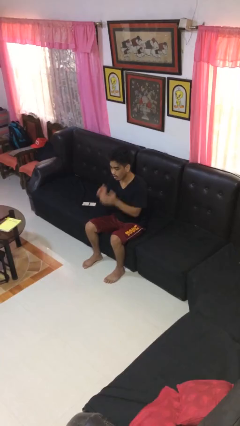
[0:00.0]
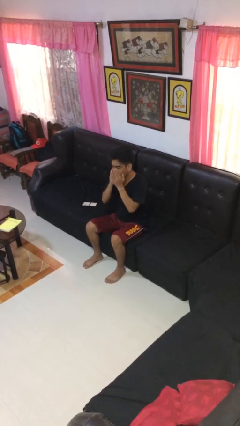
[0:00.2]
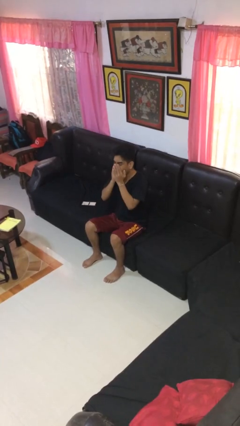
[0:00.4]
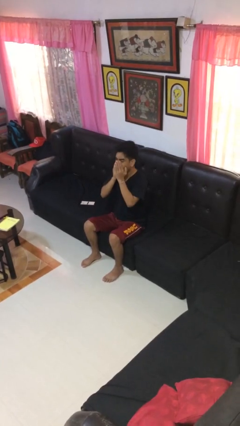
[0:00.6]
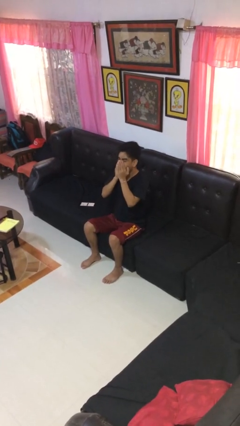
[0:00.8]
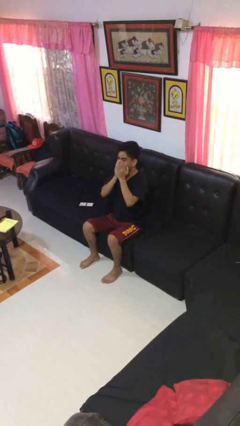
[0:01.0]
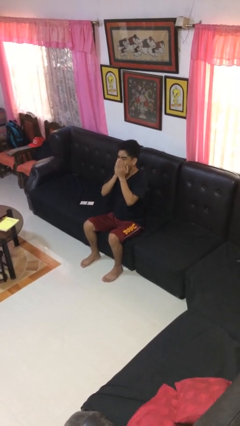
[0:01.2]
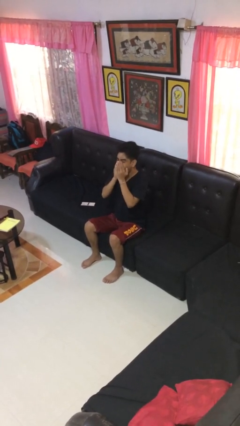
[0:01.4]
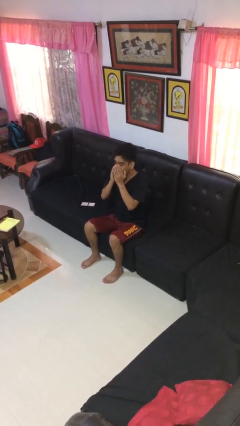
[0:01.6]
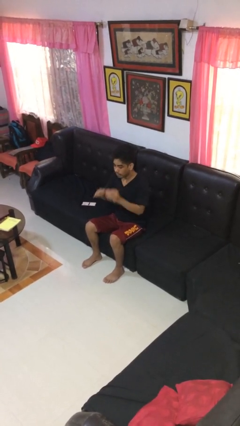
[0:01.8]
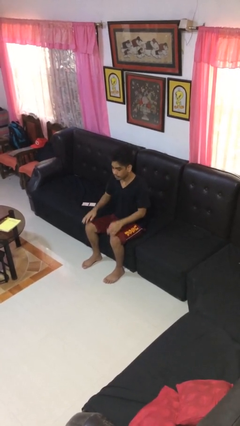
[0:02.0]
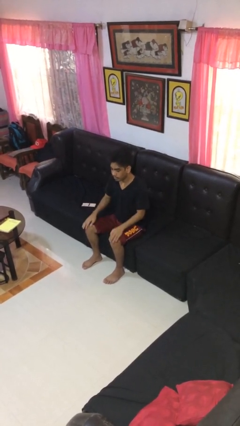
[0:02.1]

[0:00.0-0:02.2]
person yawns

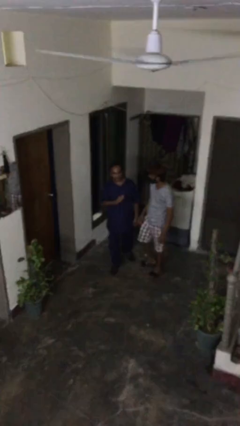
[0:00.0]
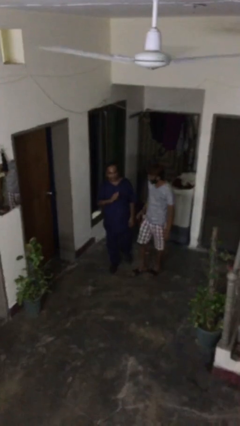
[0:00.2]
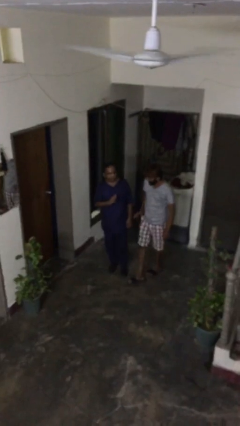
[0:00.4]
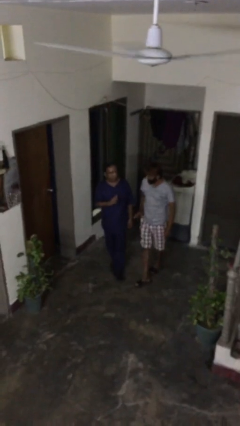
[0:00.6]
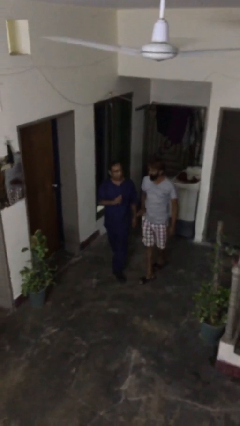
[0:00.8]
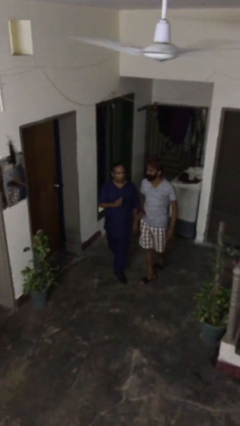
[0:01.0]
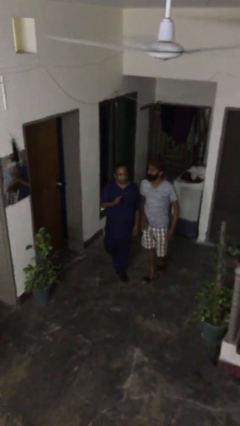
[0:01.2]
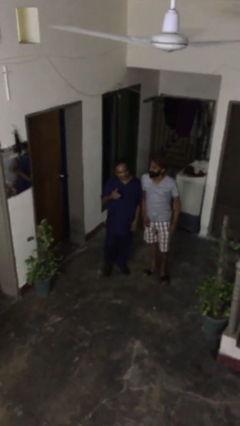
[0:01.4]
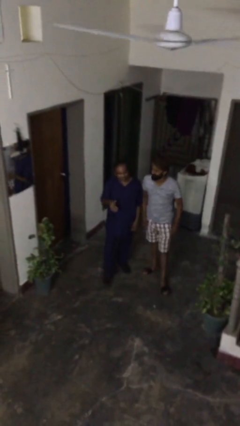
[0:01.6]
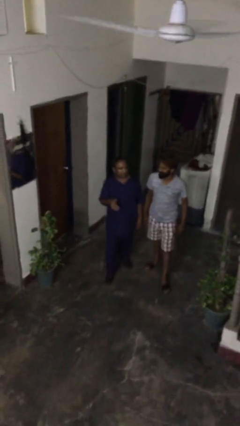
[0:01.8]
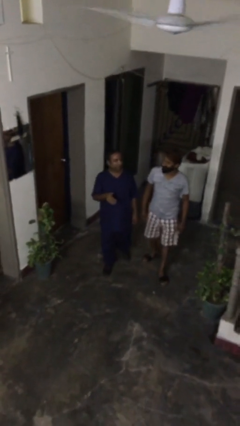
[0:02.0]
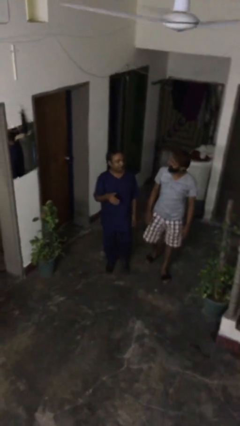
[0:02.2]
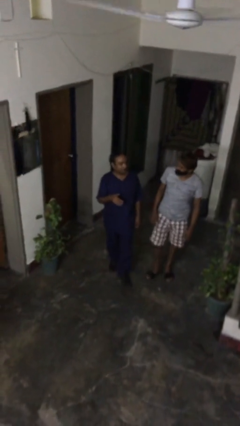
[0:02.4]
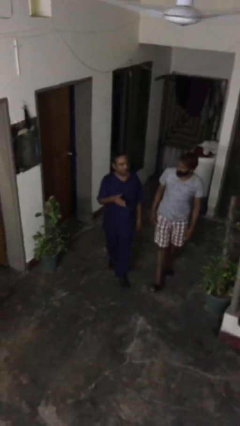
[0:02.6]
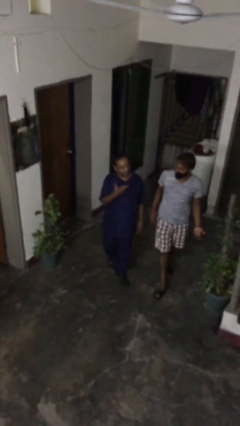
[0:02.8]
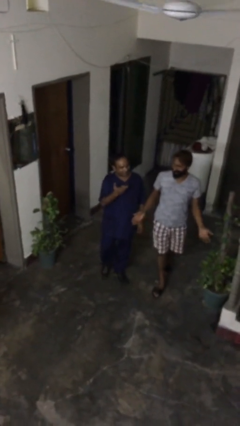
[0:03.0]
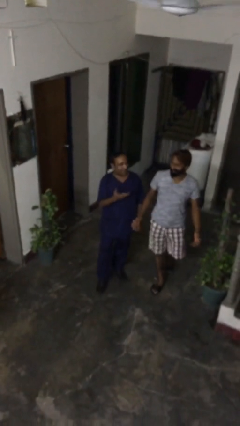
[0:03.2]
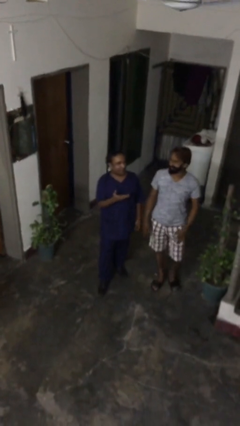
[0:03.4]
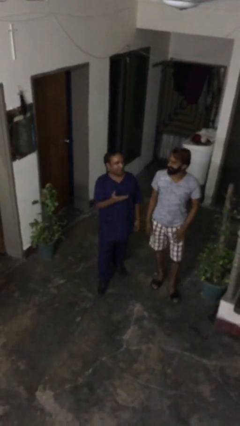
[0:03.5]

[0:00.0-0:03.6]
person talks to person

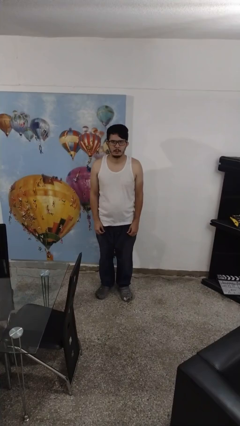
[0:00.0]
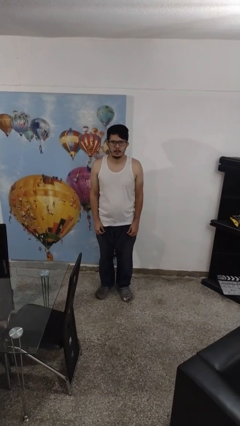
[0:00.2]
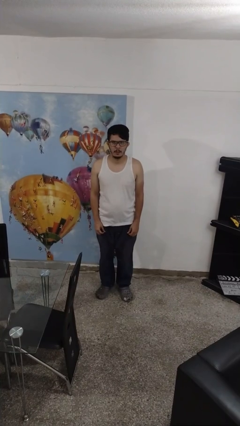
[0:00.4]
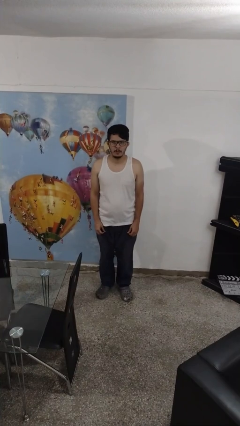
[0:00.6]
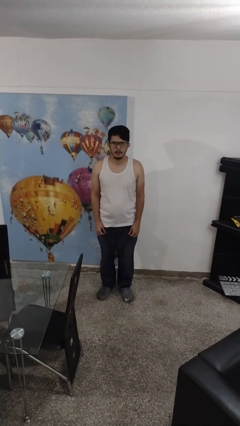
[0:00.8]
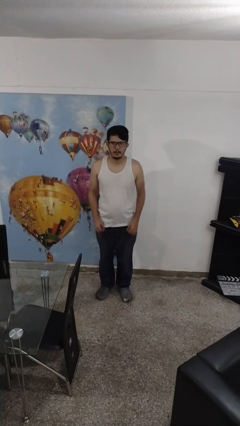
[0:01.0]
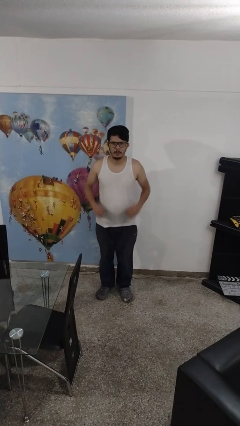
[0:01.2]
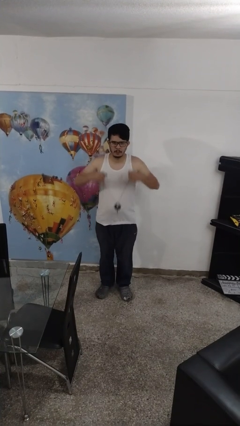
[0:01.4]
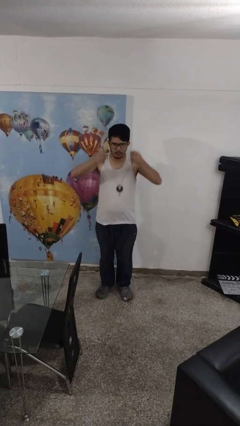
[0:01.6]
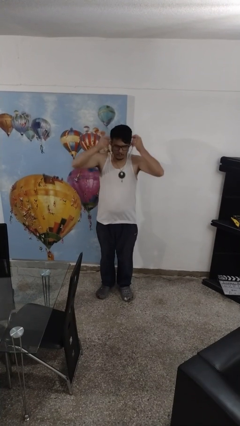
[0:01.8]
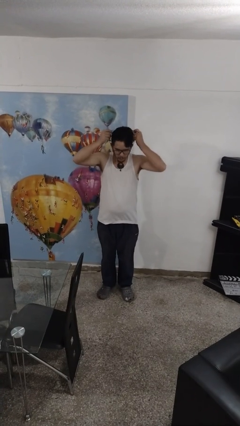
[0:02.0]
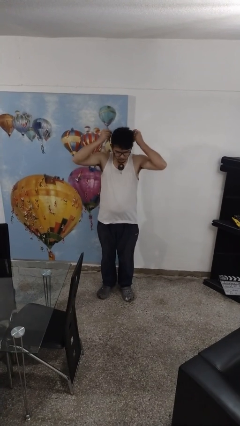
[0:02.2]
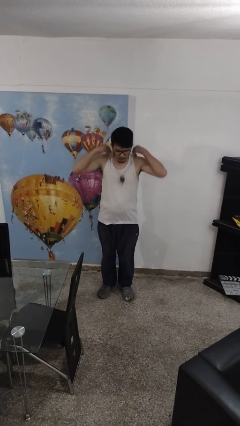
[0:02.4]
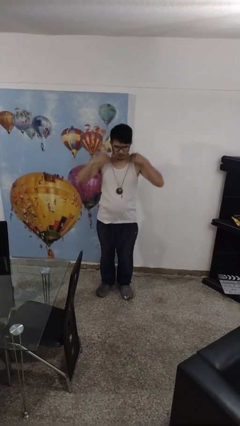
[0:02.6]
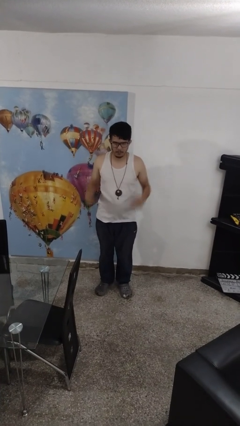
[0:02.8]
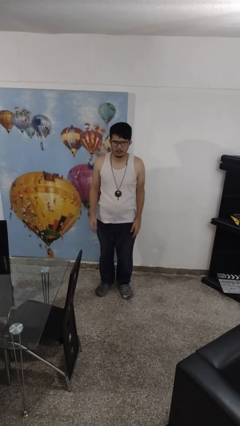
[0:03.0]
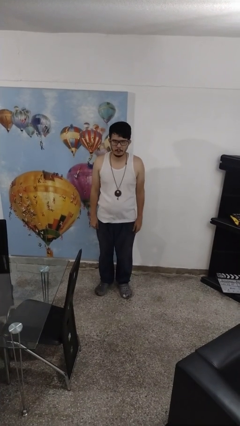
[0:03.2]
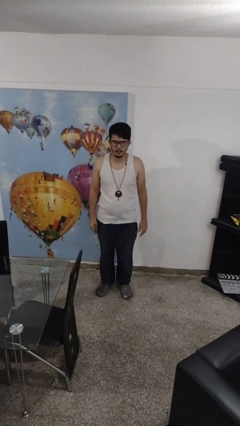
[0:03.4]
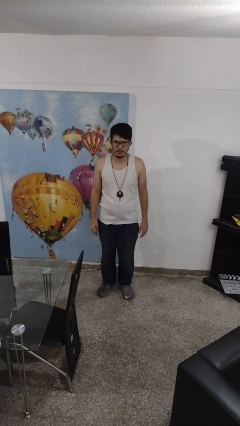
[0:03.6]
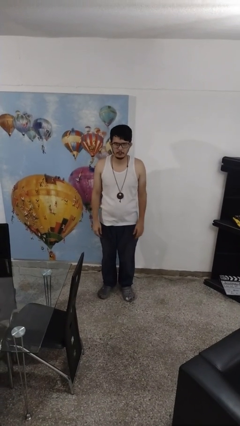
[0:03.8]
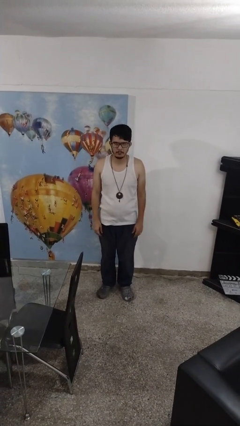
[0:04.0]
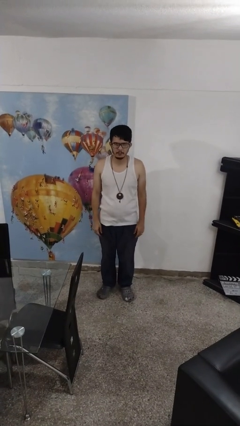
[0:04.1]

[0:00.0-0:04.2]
person puts on necklace

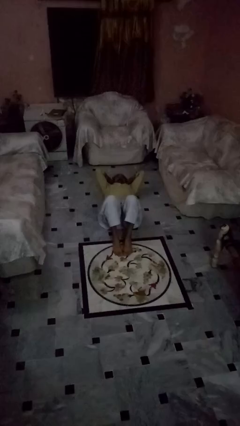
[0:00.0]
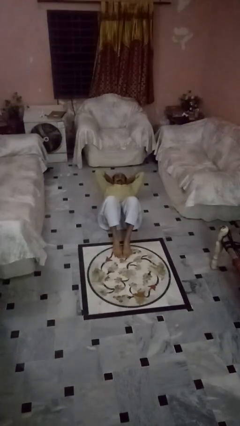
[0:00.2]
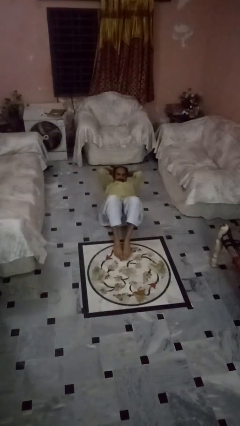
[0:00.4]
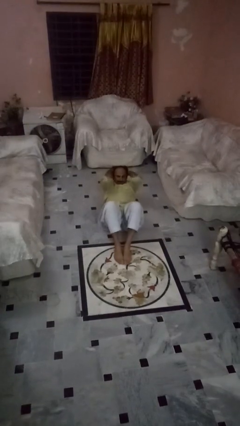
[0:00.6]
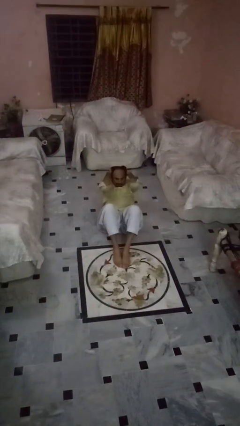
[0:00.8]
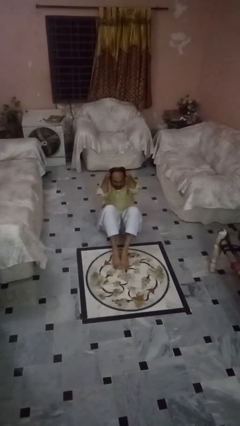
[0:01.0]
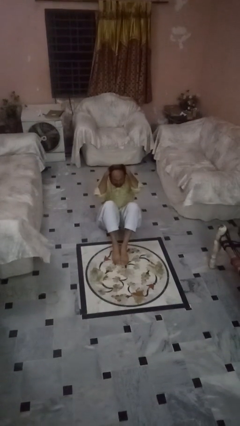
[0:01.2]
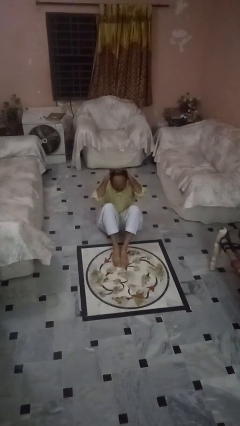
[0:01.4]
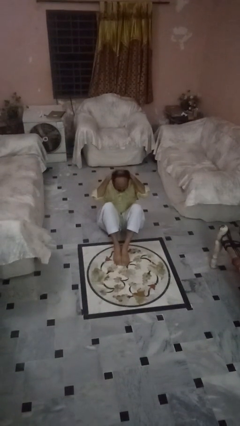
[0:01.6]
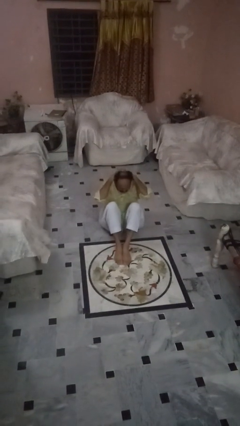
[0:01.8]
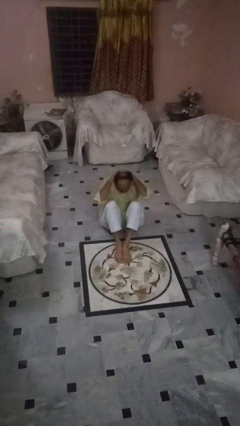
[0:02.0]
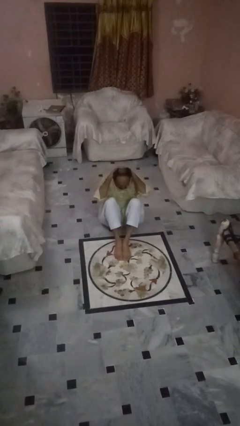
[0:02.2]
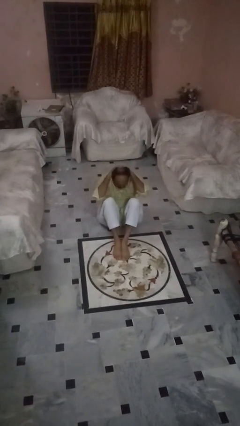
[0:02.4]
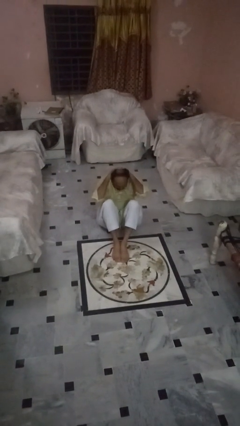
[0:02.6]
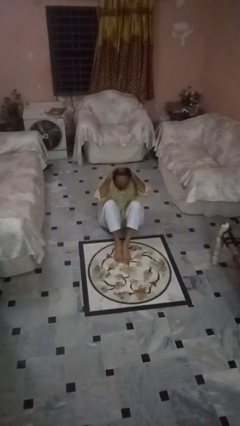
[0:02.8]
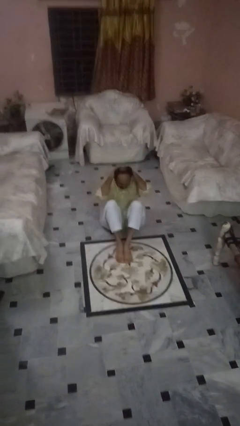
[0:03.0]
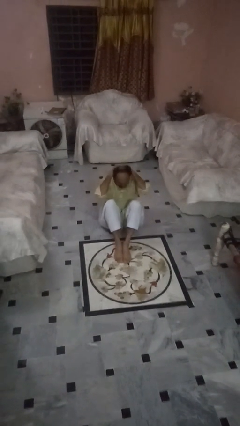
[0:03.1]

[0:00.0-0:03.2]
person exercises with situp

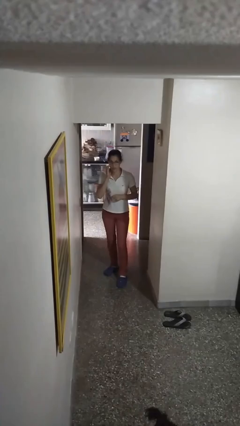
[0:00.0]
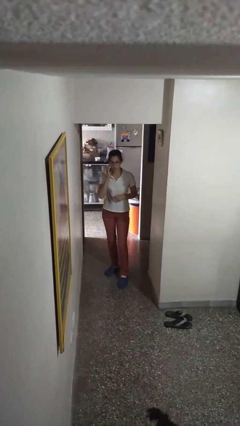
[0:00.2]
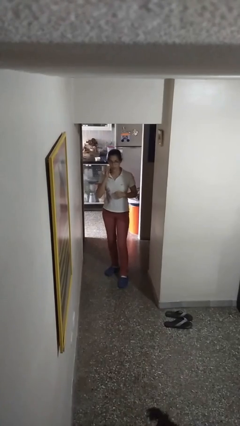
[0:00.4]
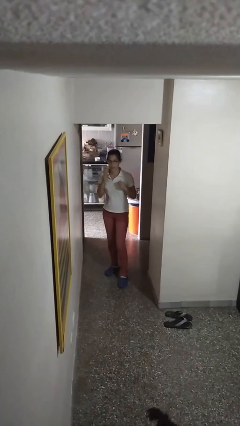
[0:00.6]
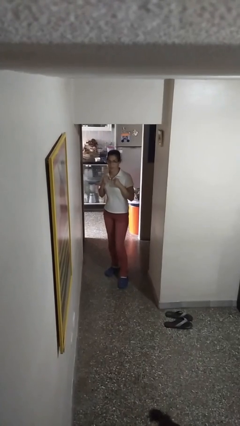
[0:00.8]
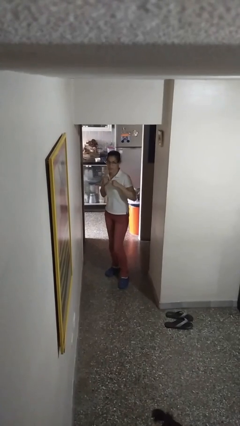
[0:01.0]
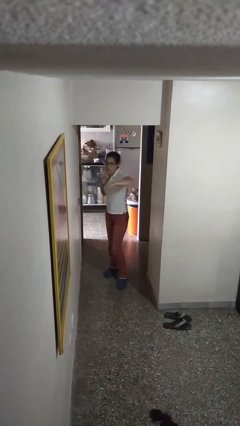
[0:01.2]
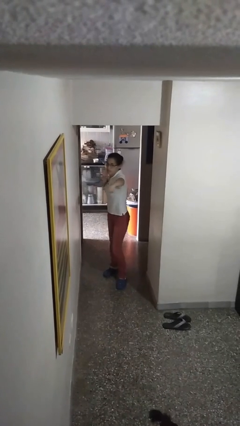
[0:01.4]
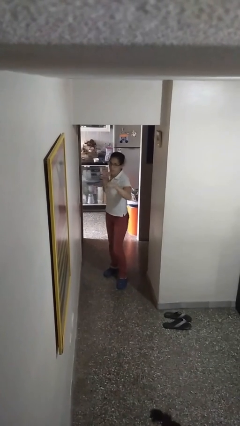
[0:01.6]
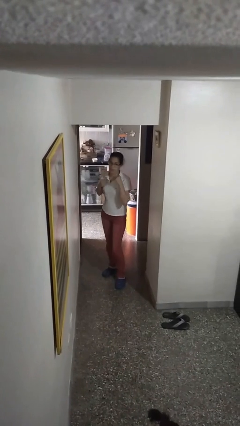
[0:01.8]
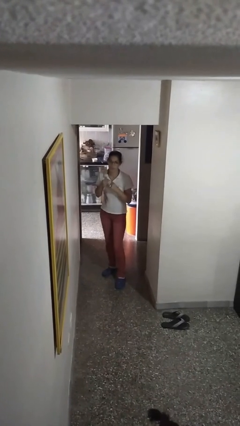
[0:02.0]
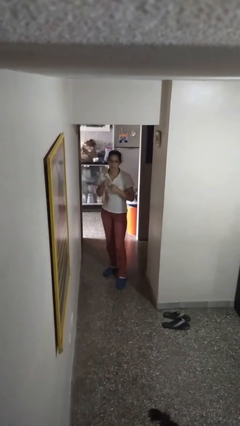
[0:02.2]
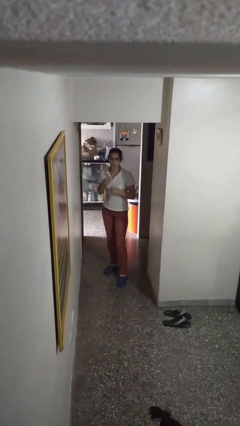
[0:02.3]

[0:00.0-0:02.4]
person karate chop

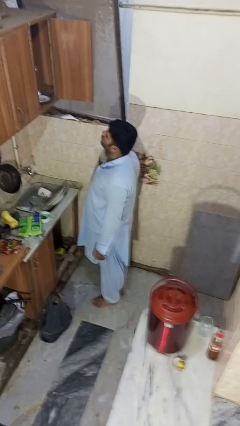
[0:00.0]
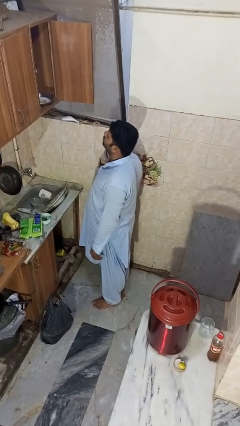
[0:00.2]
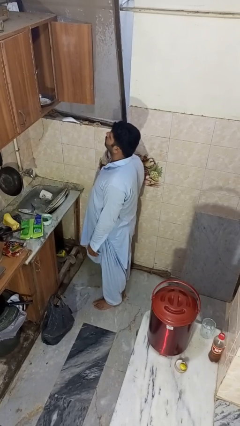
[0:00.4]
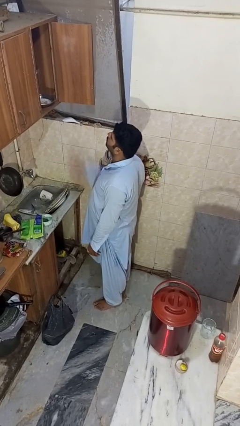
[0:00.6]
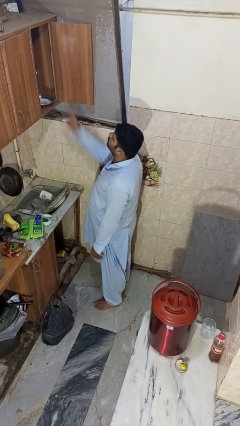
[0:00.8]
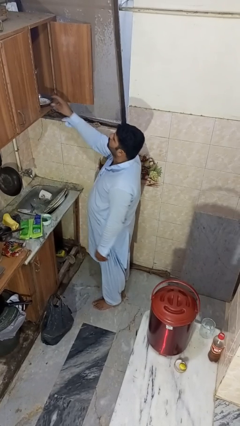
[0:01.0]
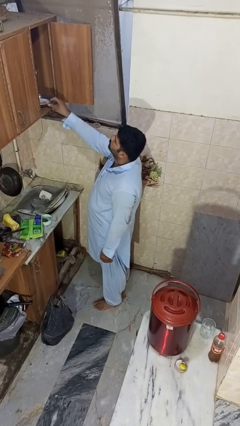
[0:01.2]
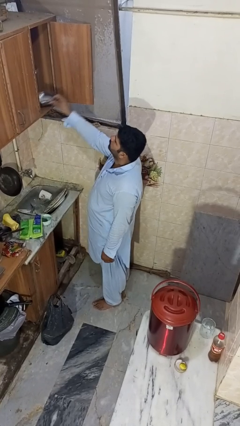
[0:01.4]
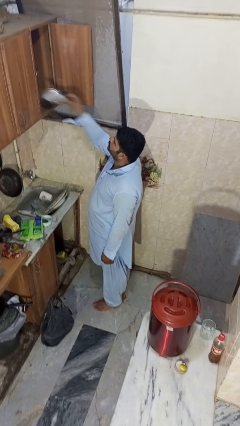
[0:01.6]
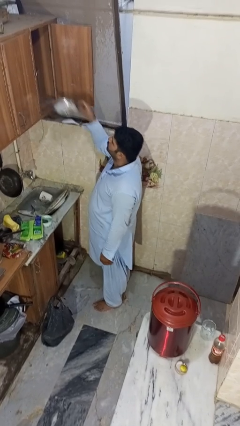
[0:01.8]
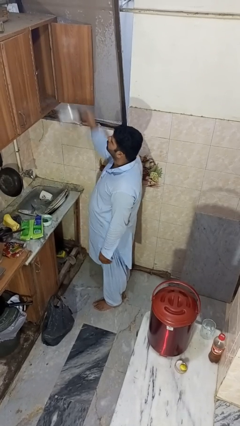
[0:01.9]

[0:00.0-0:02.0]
person takes object from cabinet
